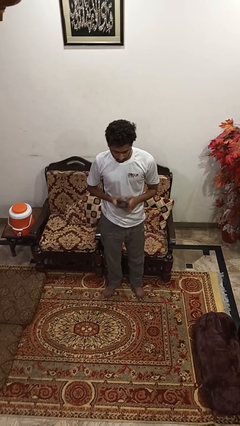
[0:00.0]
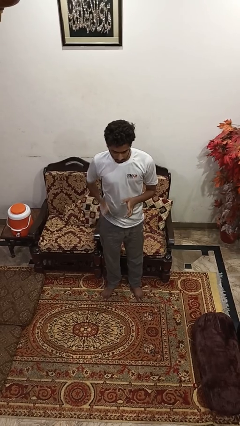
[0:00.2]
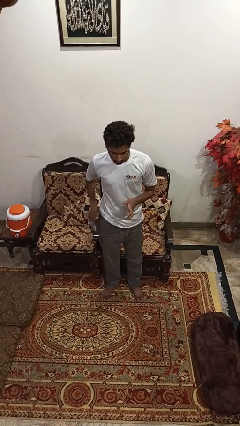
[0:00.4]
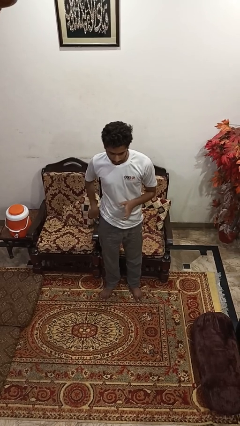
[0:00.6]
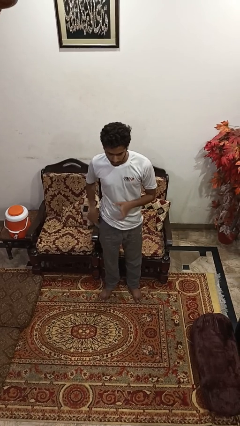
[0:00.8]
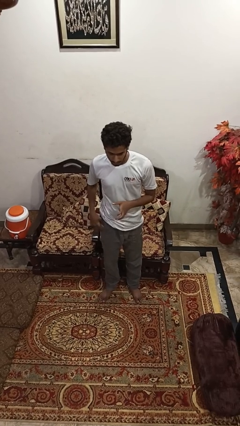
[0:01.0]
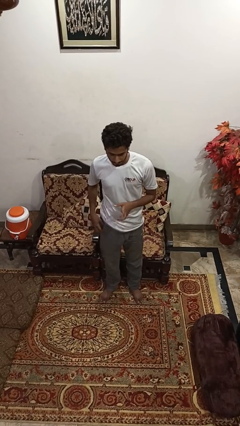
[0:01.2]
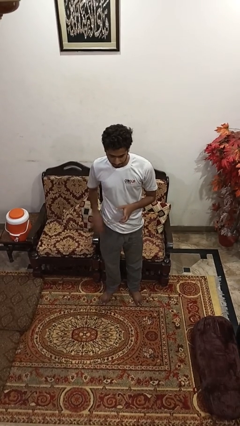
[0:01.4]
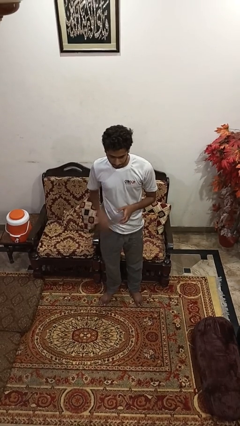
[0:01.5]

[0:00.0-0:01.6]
person puts phone into pocket

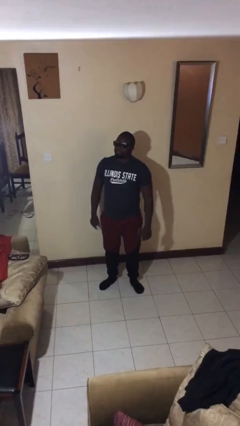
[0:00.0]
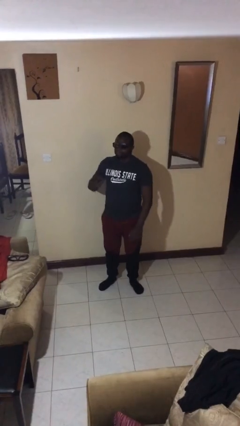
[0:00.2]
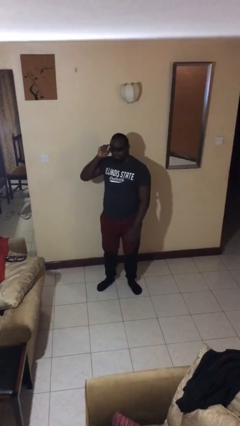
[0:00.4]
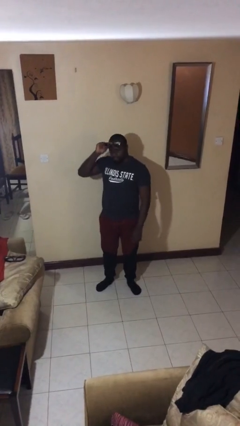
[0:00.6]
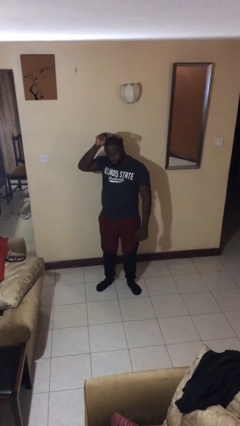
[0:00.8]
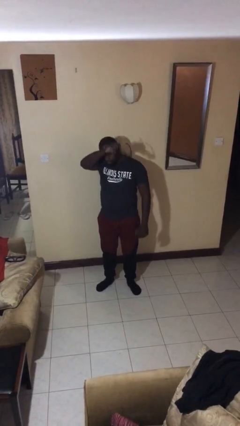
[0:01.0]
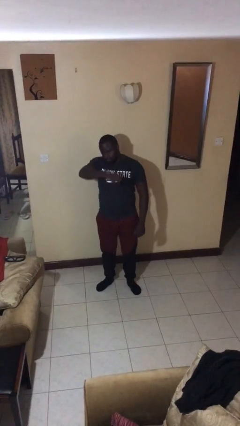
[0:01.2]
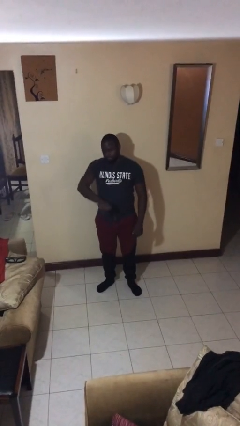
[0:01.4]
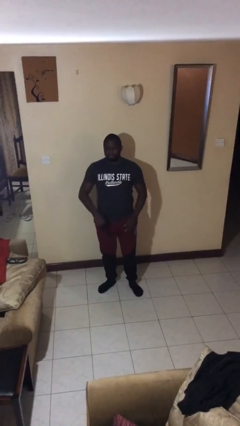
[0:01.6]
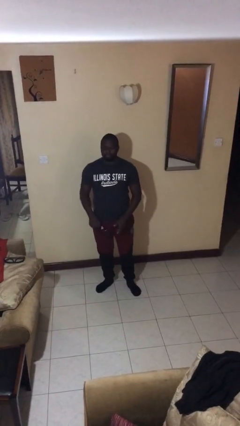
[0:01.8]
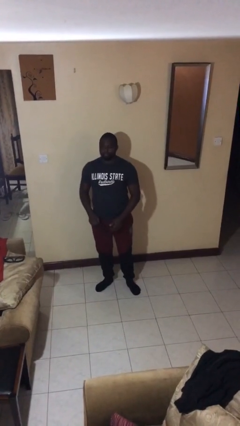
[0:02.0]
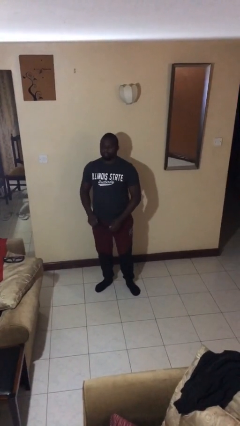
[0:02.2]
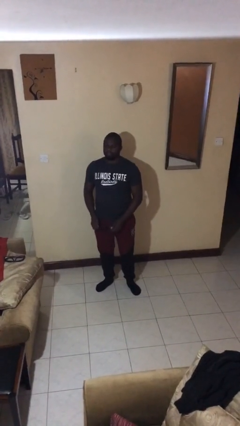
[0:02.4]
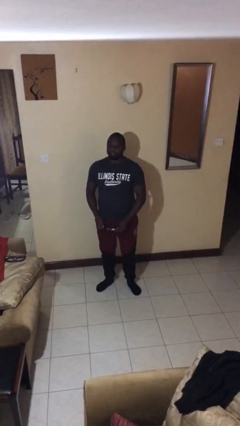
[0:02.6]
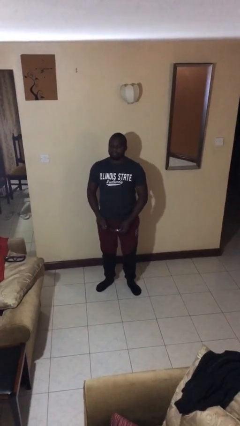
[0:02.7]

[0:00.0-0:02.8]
person takes off sunglasses

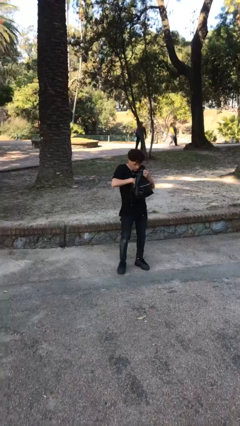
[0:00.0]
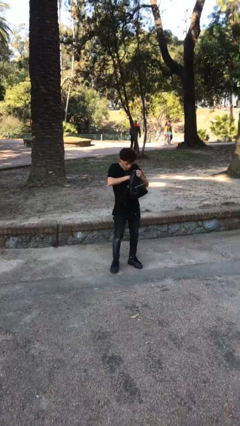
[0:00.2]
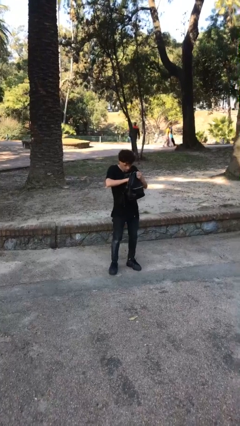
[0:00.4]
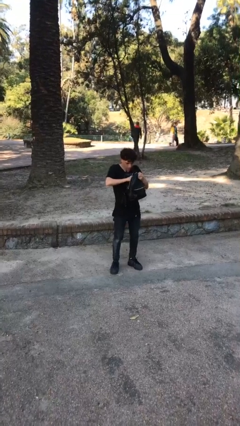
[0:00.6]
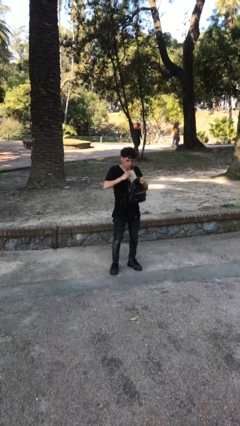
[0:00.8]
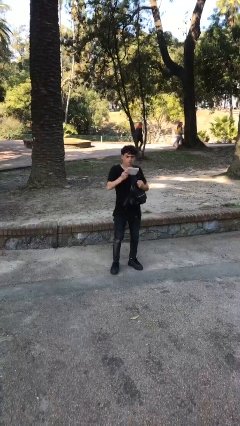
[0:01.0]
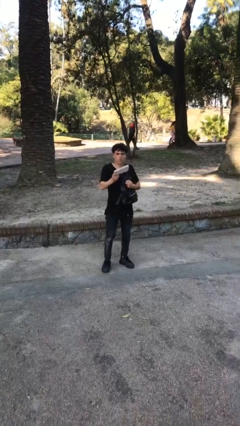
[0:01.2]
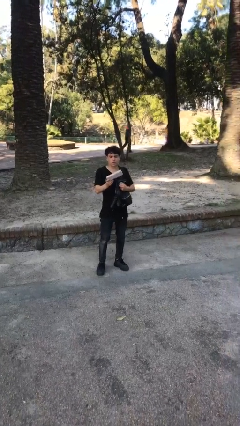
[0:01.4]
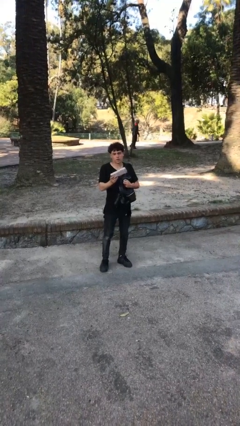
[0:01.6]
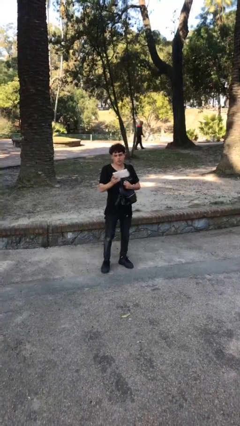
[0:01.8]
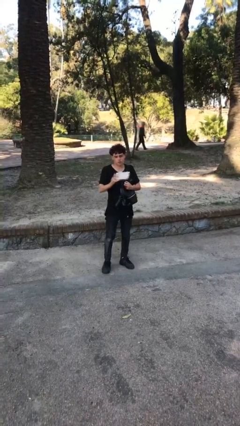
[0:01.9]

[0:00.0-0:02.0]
person takes object from purse

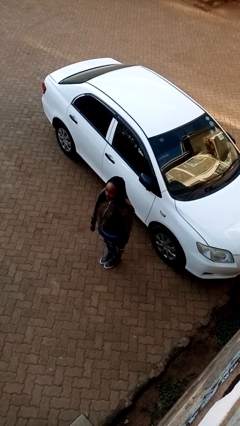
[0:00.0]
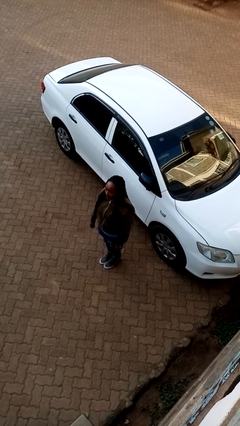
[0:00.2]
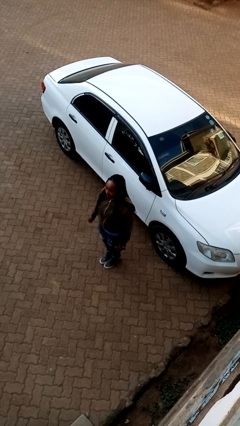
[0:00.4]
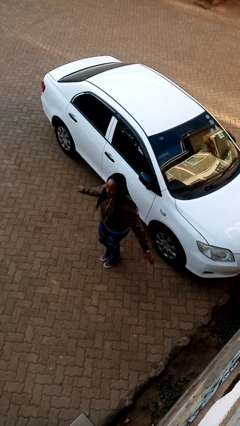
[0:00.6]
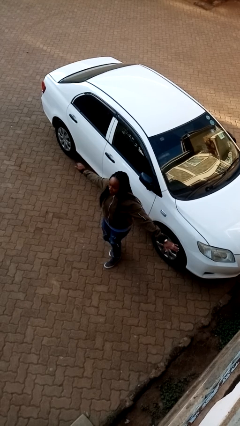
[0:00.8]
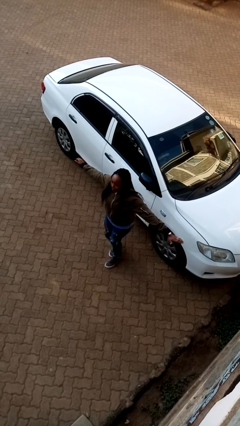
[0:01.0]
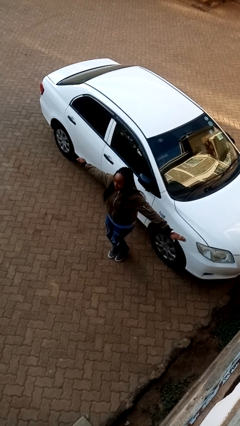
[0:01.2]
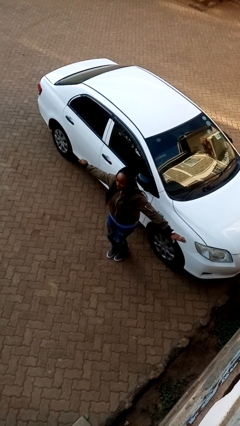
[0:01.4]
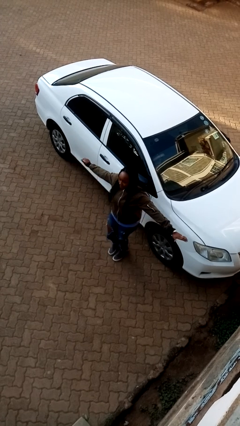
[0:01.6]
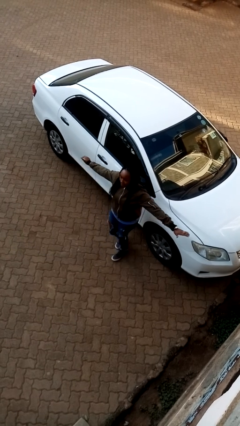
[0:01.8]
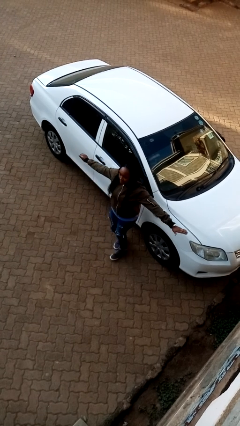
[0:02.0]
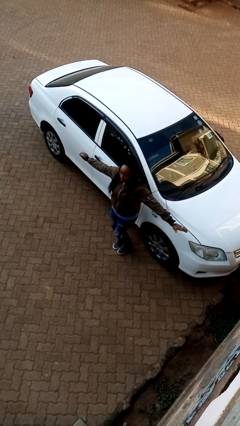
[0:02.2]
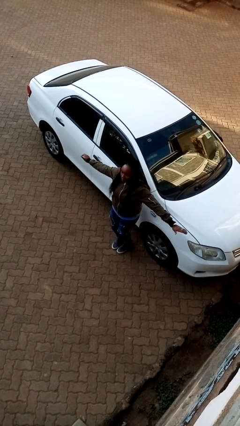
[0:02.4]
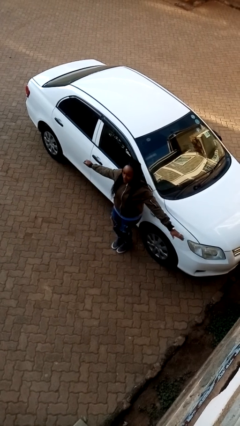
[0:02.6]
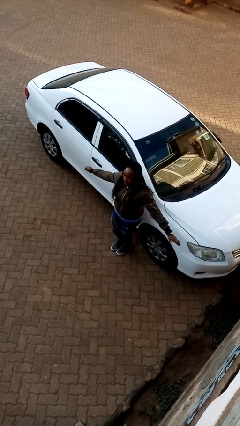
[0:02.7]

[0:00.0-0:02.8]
person walks tiptoe

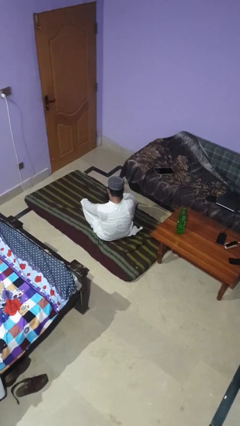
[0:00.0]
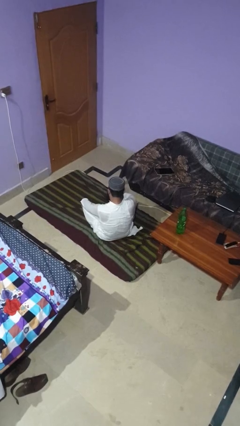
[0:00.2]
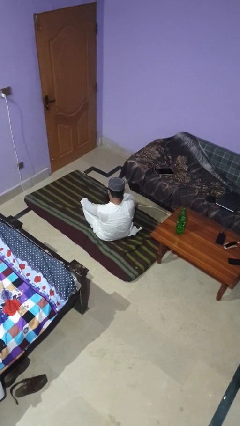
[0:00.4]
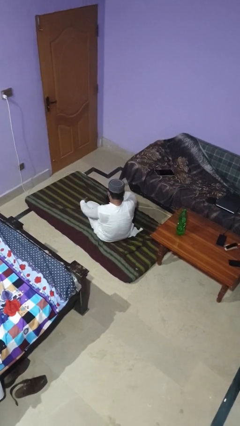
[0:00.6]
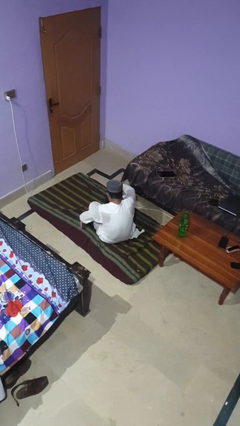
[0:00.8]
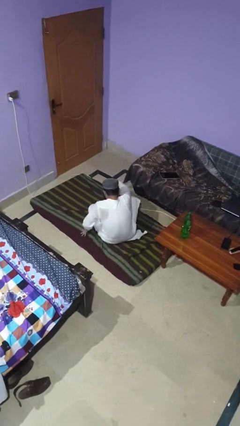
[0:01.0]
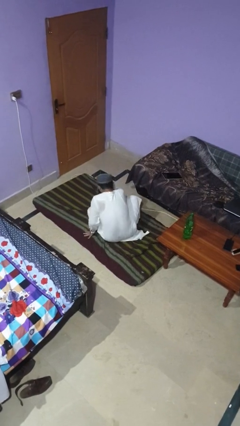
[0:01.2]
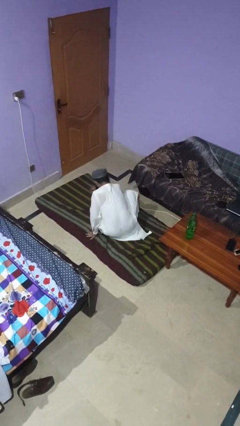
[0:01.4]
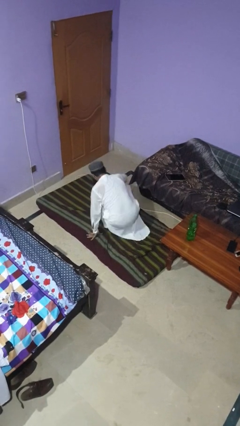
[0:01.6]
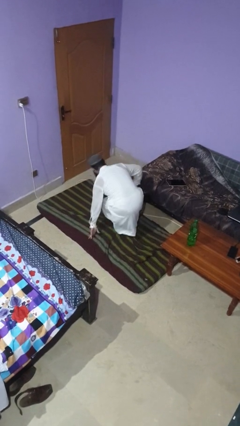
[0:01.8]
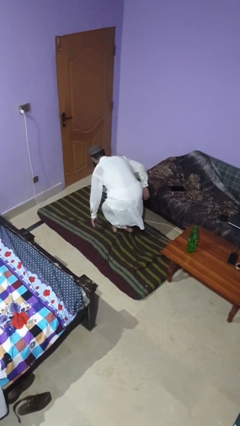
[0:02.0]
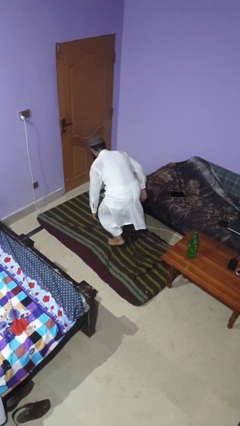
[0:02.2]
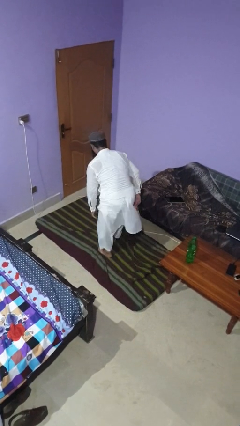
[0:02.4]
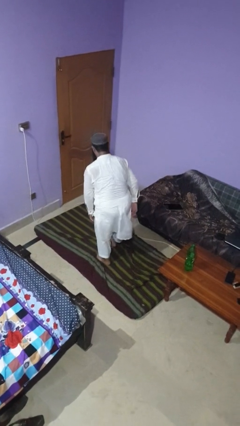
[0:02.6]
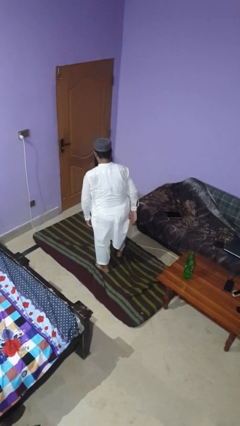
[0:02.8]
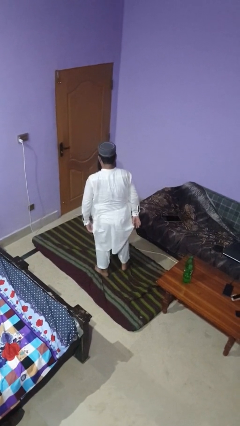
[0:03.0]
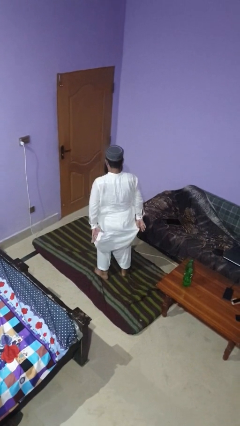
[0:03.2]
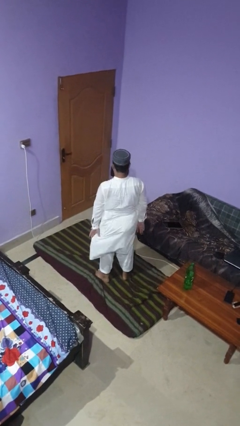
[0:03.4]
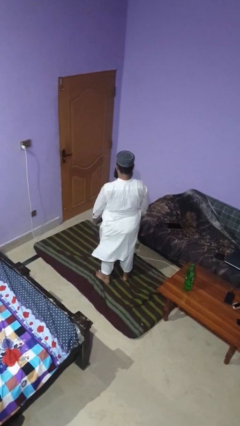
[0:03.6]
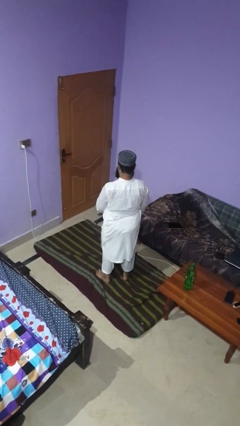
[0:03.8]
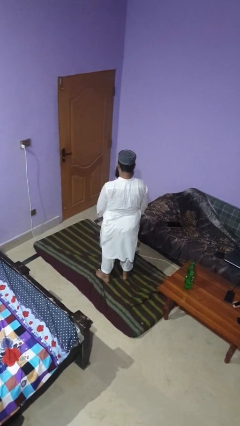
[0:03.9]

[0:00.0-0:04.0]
person stands up from floor

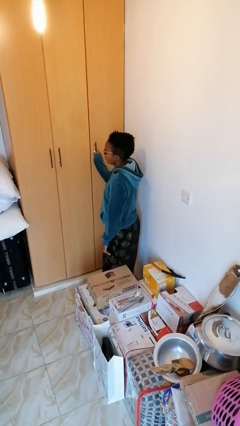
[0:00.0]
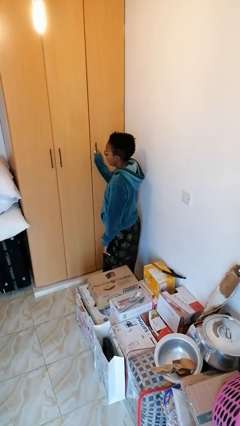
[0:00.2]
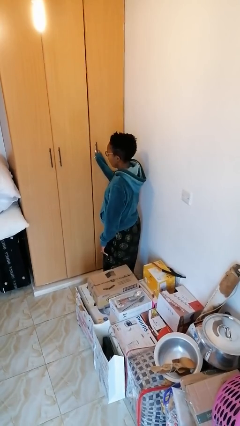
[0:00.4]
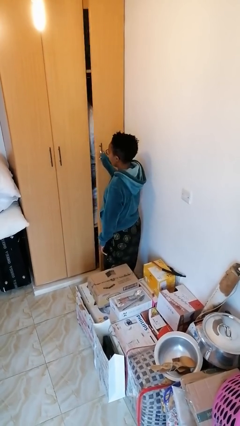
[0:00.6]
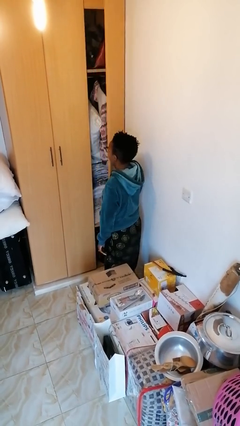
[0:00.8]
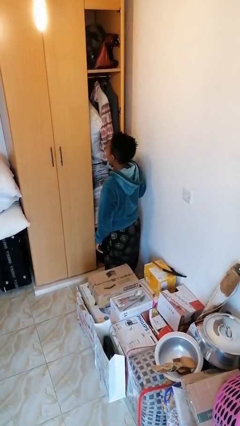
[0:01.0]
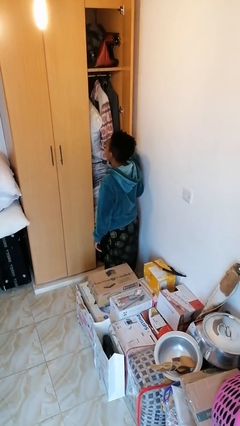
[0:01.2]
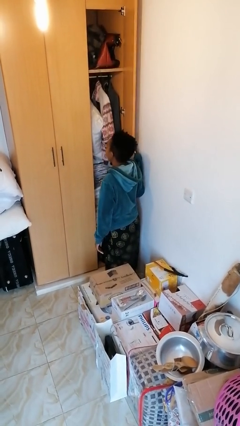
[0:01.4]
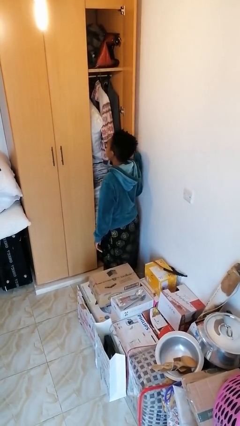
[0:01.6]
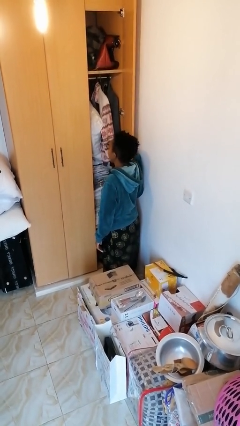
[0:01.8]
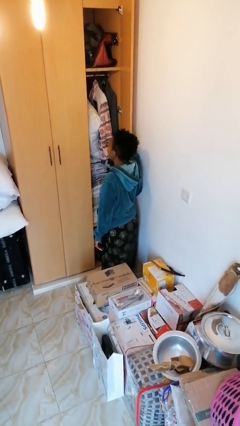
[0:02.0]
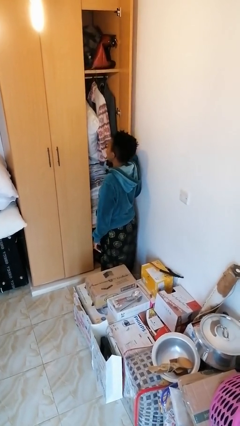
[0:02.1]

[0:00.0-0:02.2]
person opens closet door

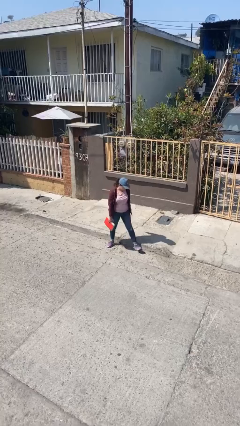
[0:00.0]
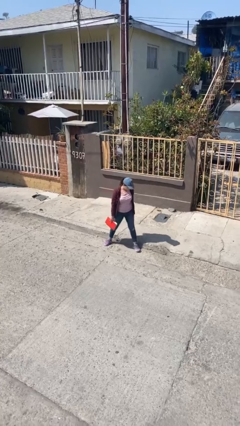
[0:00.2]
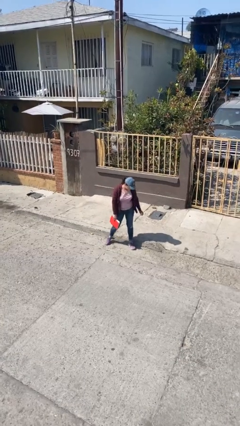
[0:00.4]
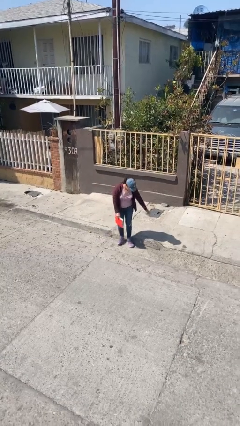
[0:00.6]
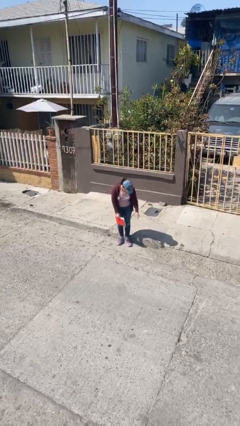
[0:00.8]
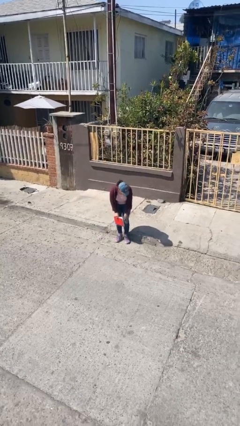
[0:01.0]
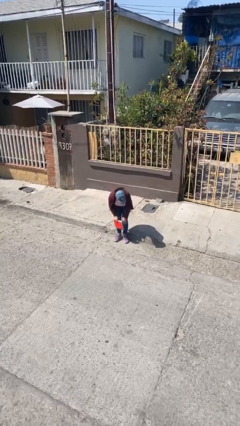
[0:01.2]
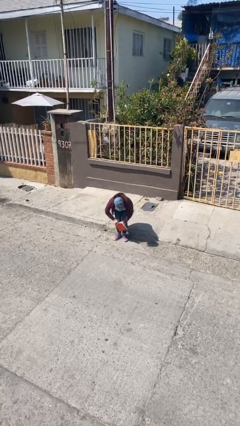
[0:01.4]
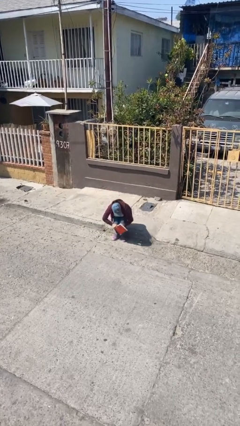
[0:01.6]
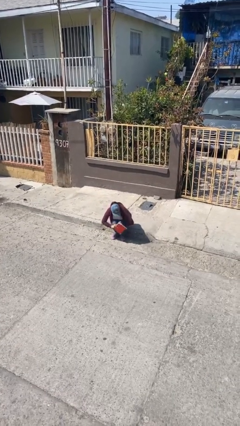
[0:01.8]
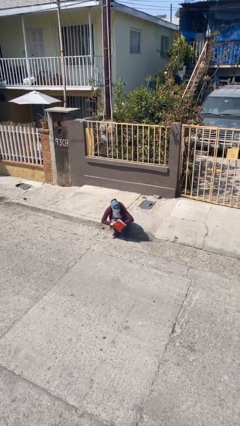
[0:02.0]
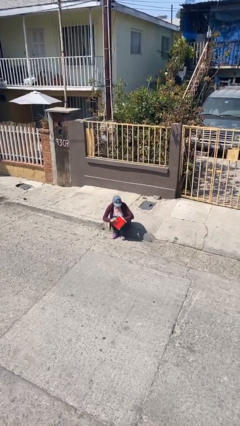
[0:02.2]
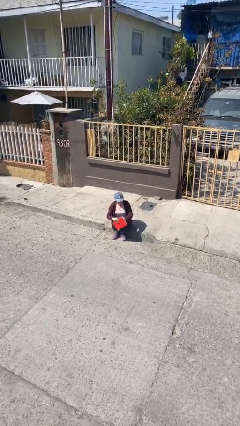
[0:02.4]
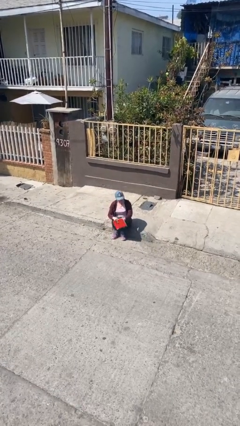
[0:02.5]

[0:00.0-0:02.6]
person sits down
